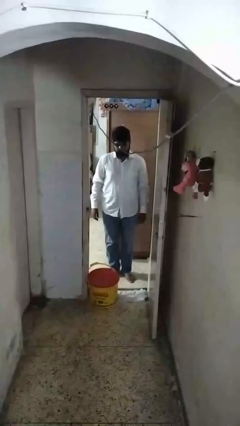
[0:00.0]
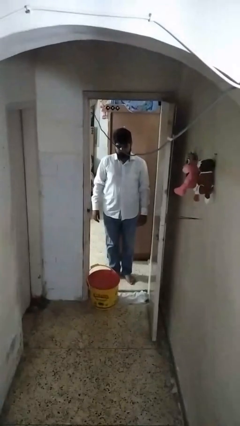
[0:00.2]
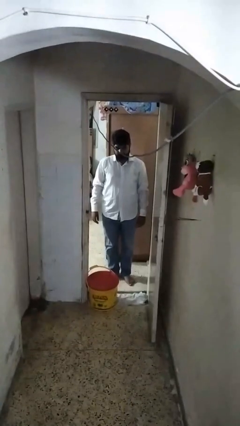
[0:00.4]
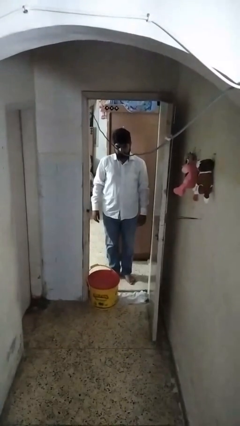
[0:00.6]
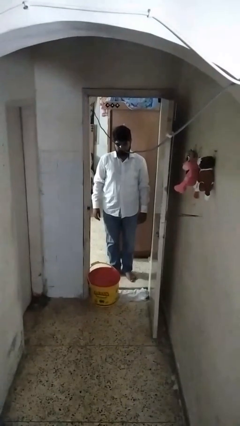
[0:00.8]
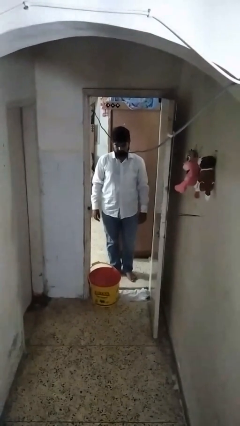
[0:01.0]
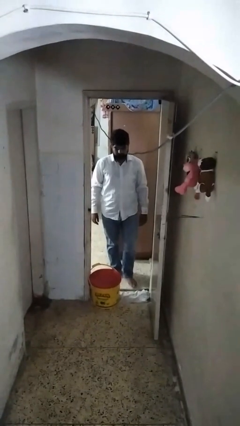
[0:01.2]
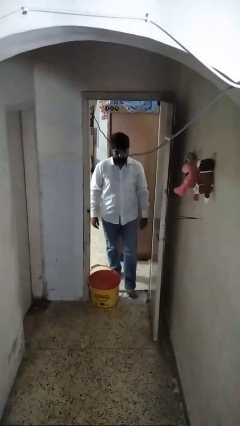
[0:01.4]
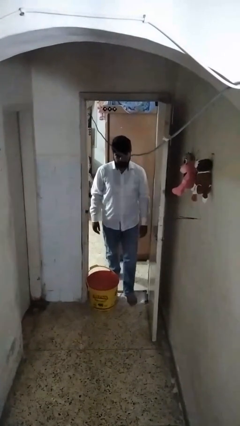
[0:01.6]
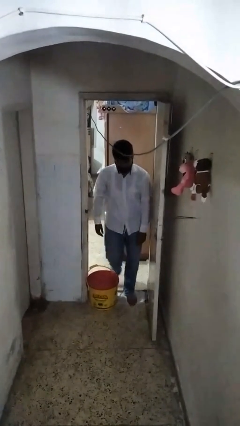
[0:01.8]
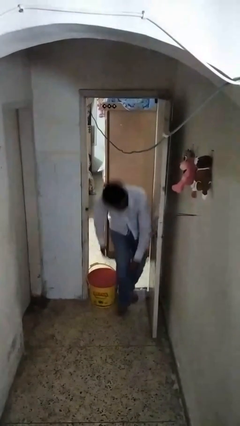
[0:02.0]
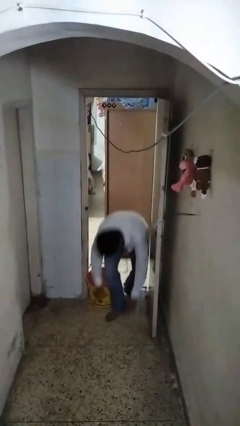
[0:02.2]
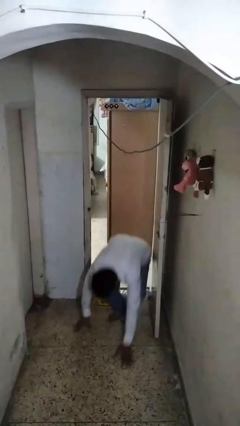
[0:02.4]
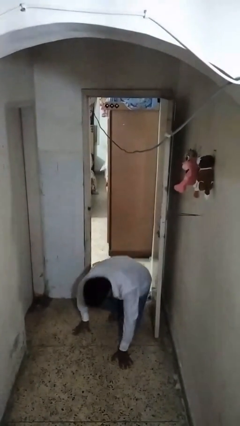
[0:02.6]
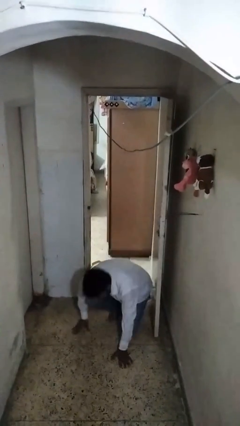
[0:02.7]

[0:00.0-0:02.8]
person trips on object on floor

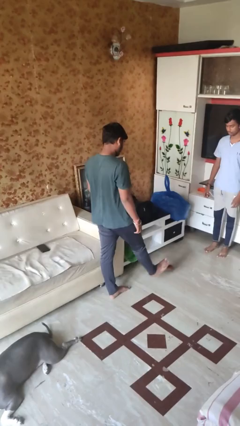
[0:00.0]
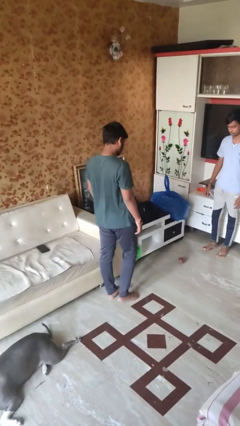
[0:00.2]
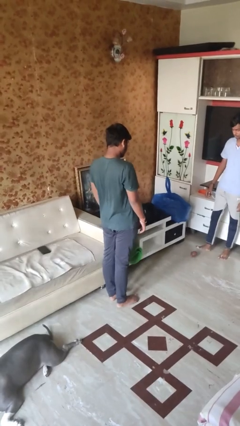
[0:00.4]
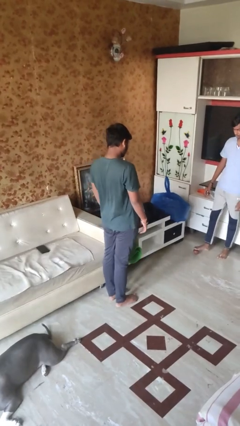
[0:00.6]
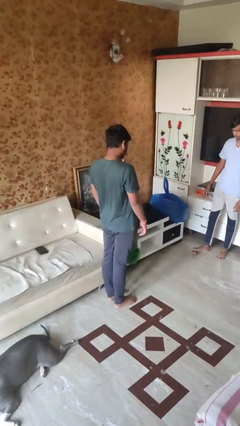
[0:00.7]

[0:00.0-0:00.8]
person kicks object to person

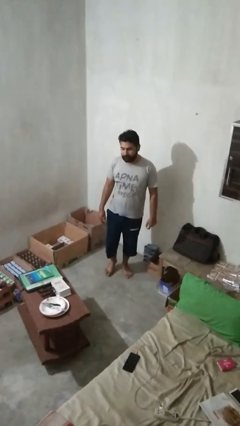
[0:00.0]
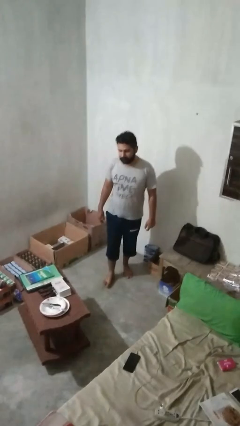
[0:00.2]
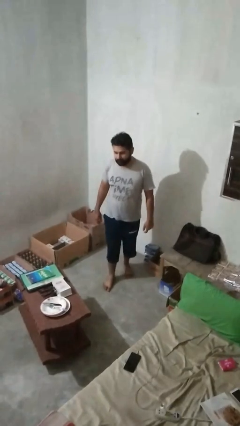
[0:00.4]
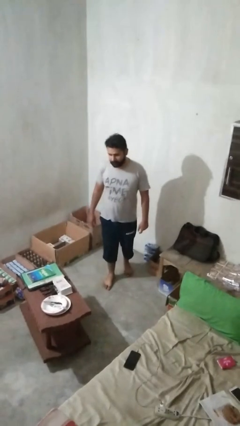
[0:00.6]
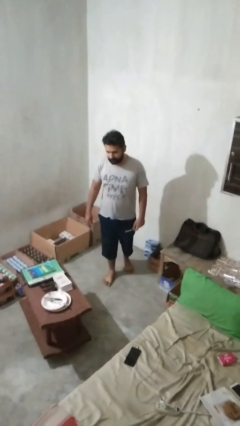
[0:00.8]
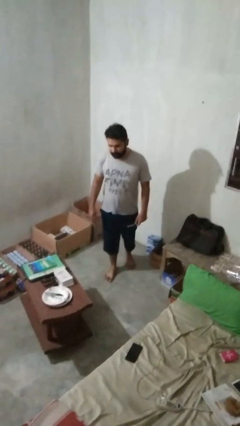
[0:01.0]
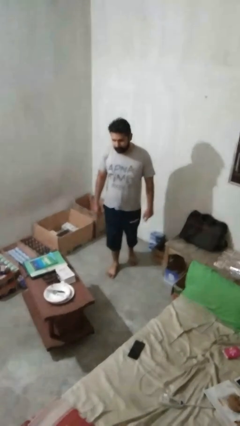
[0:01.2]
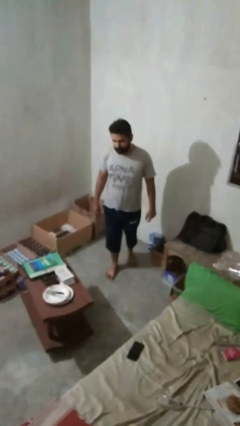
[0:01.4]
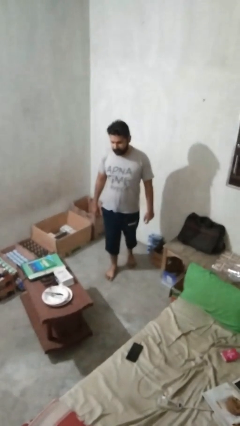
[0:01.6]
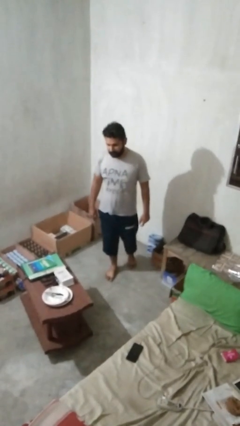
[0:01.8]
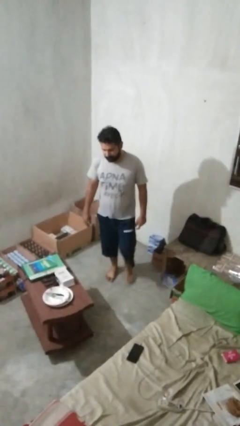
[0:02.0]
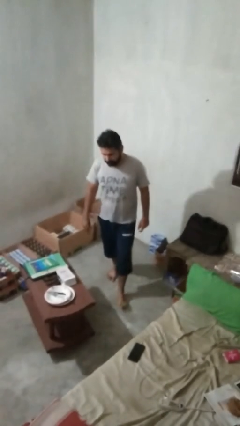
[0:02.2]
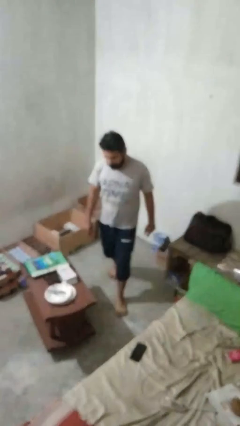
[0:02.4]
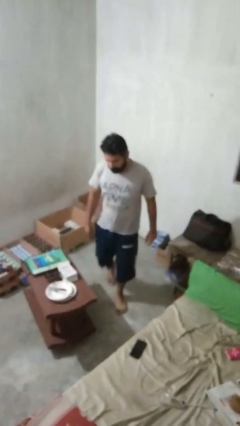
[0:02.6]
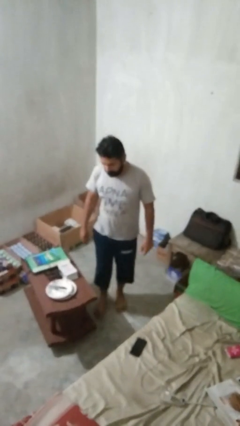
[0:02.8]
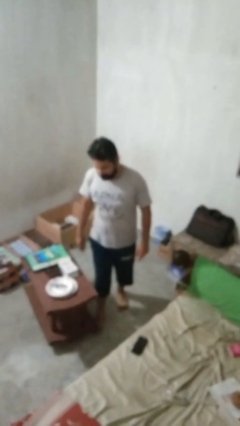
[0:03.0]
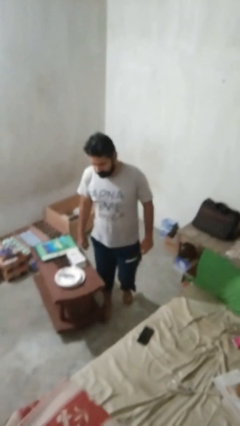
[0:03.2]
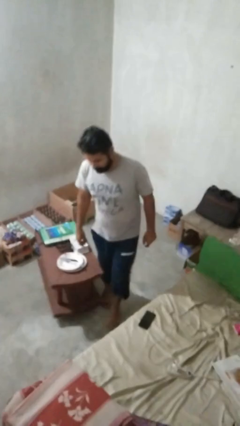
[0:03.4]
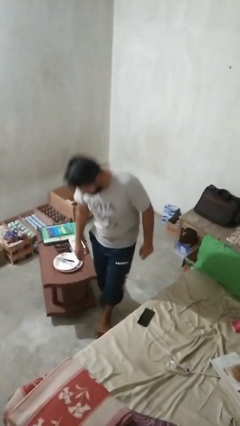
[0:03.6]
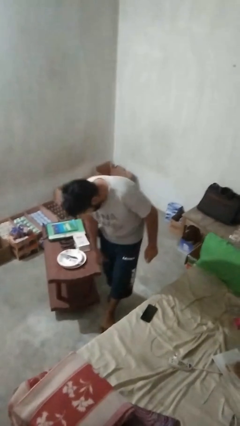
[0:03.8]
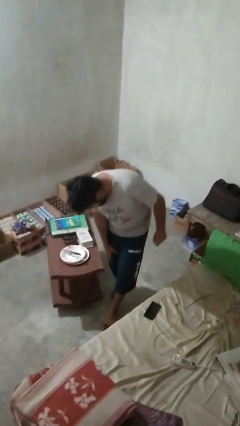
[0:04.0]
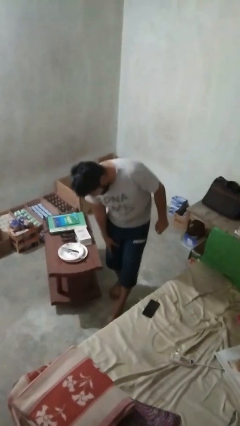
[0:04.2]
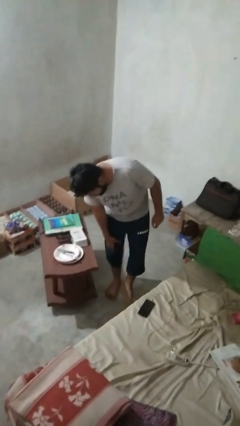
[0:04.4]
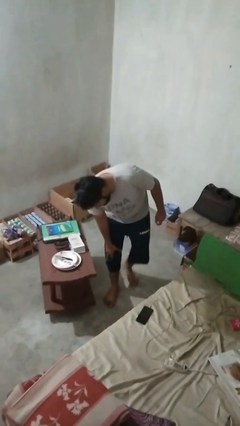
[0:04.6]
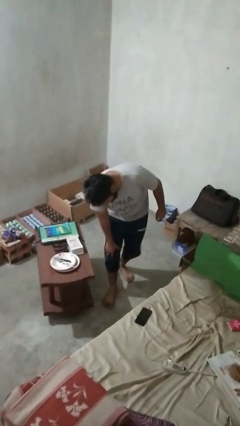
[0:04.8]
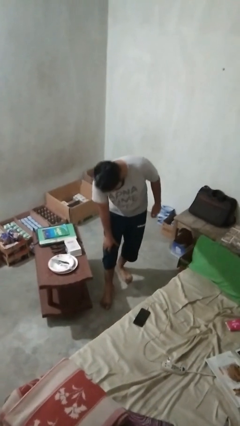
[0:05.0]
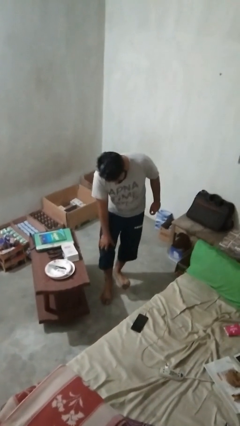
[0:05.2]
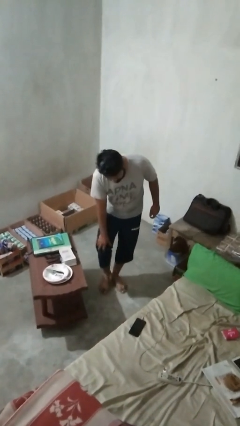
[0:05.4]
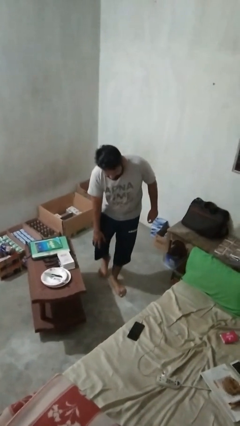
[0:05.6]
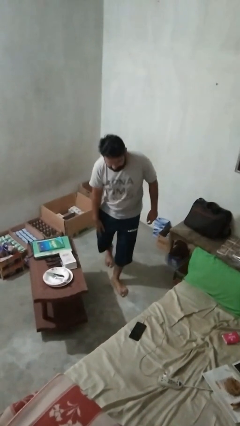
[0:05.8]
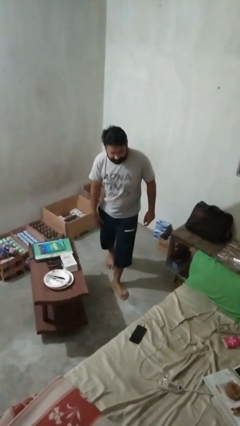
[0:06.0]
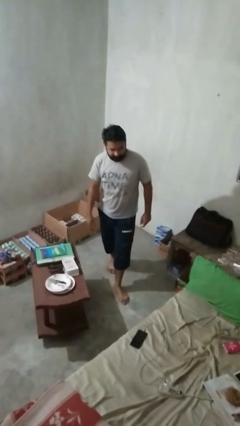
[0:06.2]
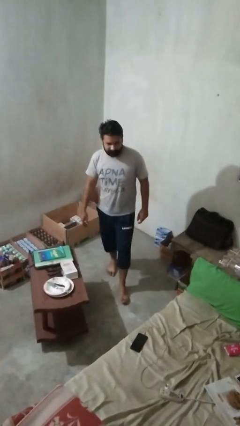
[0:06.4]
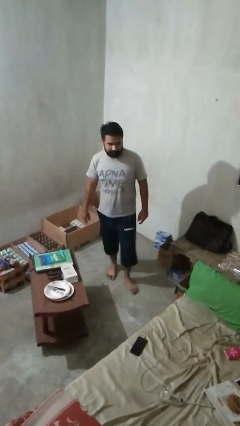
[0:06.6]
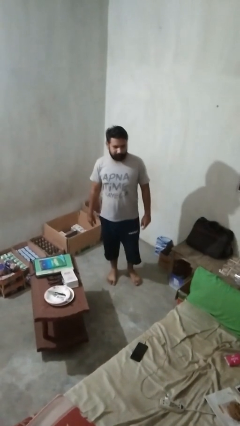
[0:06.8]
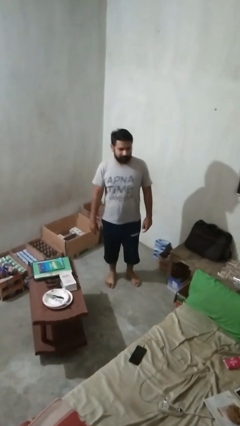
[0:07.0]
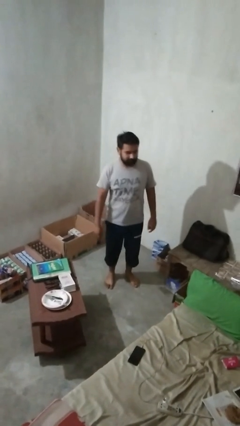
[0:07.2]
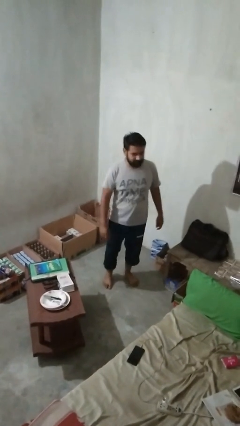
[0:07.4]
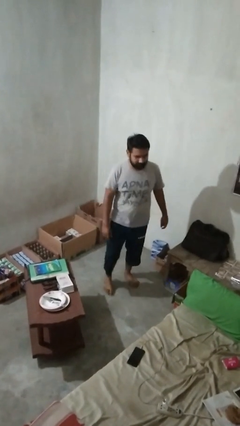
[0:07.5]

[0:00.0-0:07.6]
person bumps into table

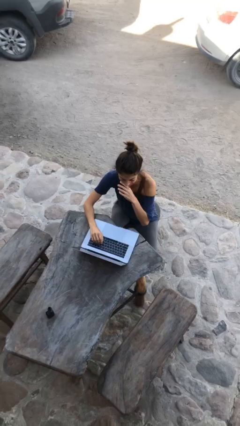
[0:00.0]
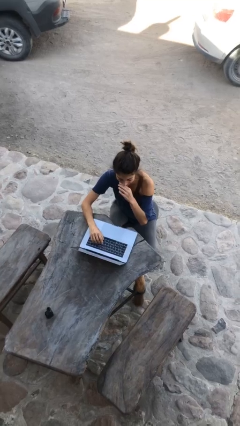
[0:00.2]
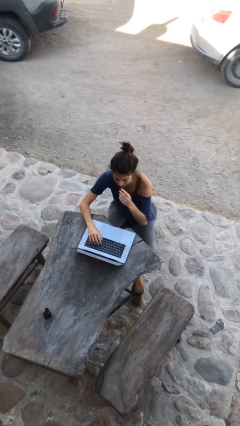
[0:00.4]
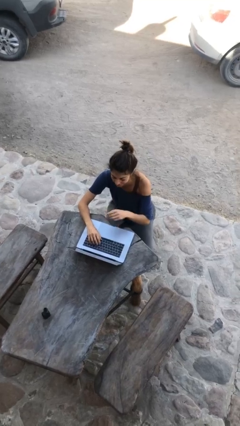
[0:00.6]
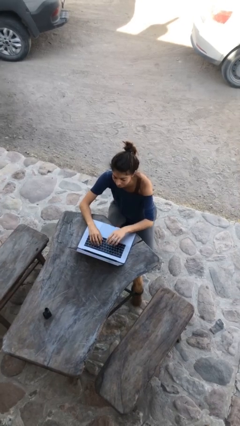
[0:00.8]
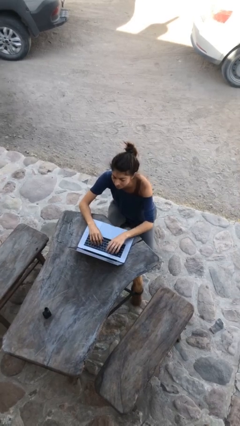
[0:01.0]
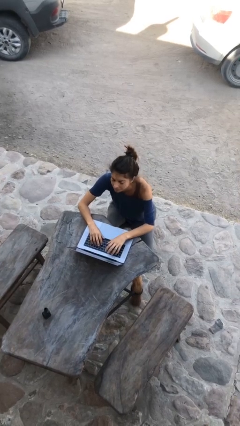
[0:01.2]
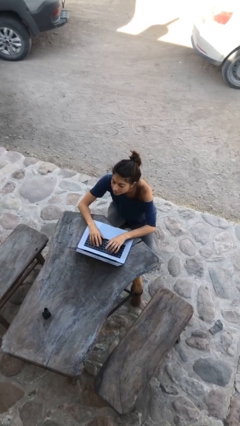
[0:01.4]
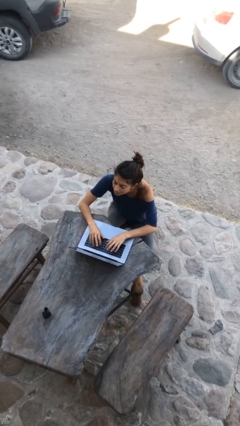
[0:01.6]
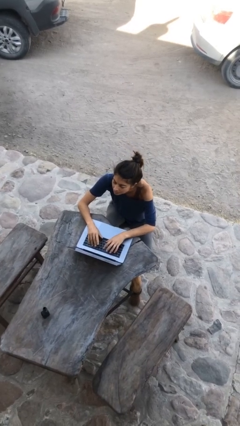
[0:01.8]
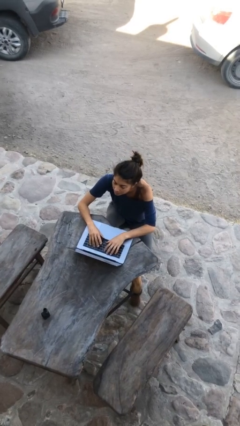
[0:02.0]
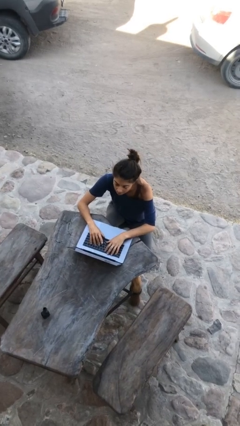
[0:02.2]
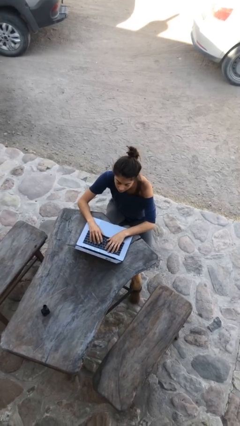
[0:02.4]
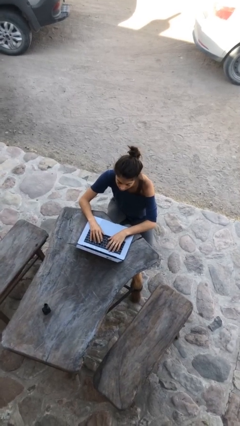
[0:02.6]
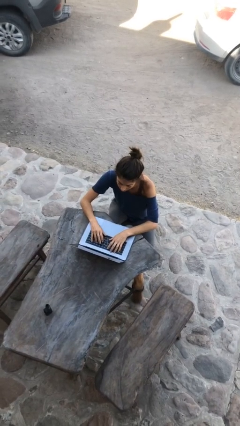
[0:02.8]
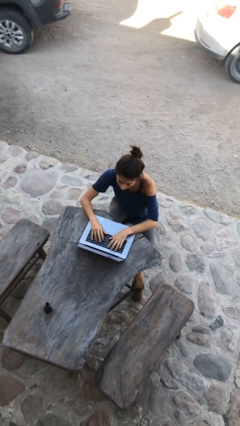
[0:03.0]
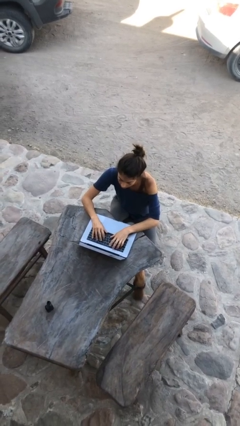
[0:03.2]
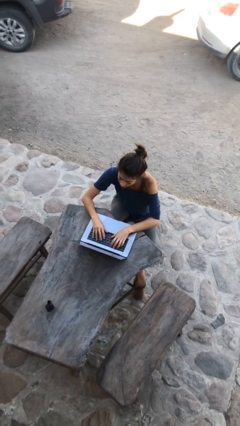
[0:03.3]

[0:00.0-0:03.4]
person interacts with laptop

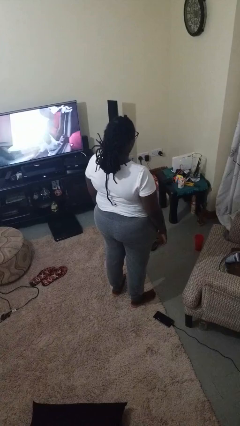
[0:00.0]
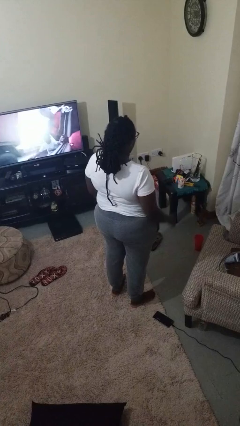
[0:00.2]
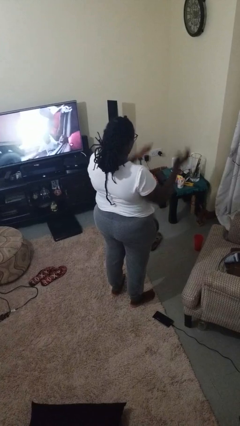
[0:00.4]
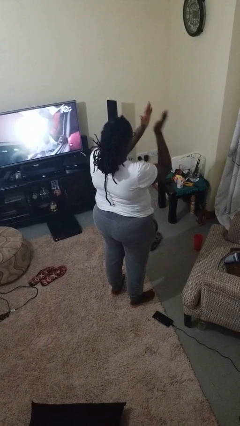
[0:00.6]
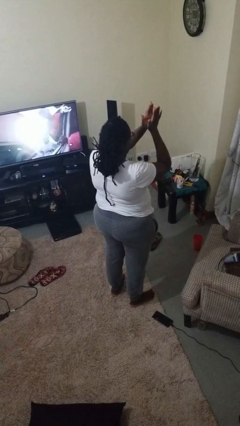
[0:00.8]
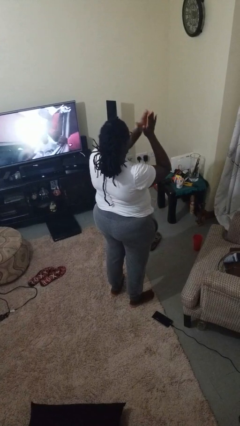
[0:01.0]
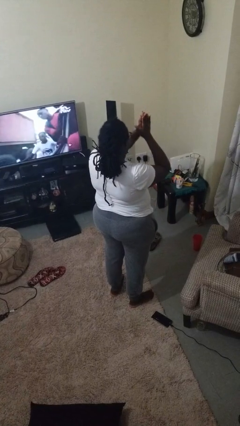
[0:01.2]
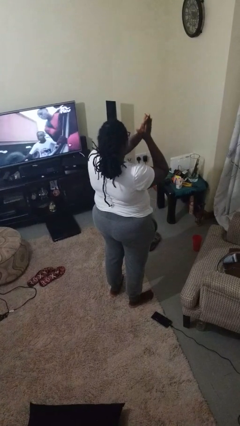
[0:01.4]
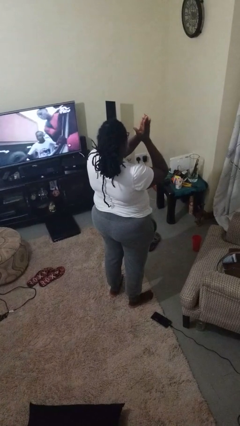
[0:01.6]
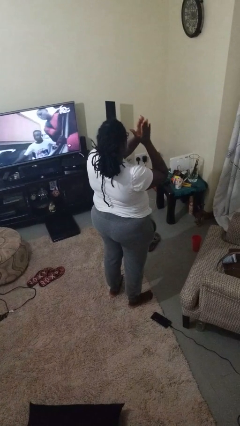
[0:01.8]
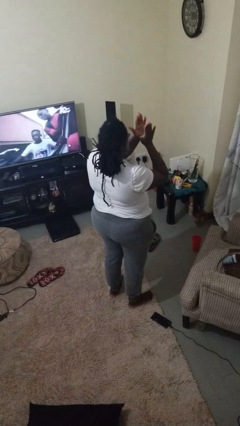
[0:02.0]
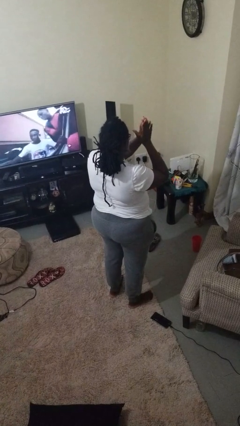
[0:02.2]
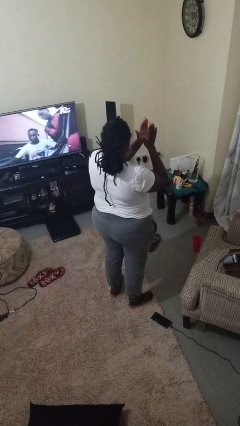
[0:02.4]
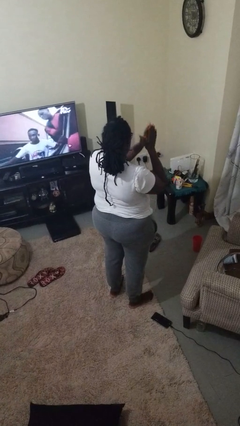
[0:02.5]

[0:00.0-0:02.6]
person claps hands

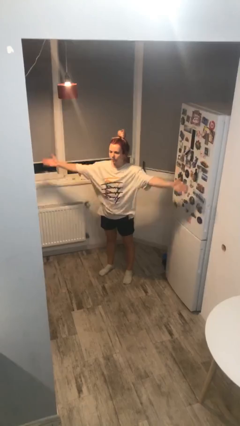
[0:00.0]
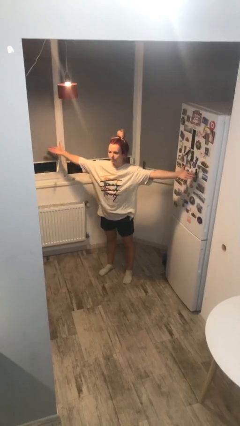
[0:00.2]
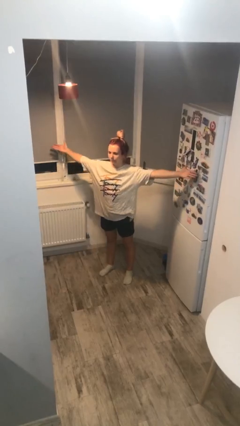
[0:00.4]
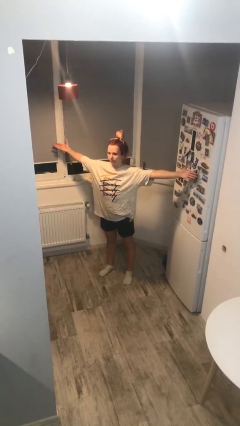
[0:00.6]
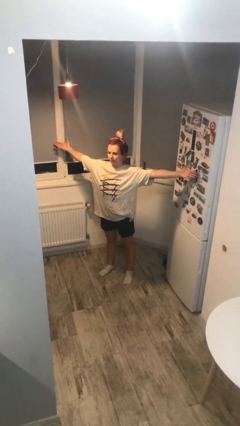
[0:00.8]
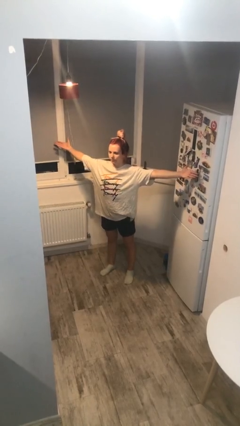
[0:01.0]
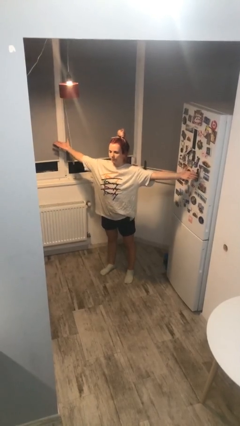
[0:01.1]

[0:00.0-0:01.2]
person stretches arms to side
